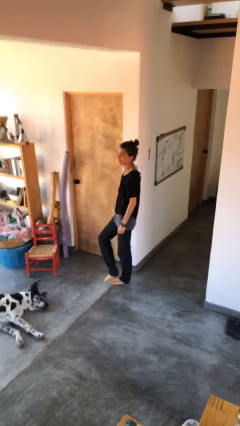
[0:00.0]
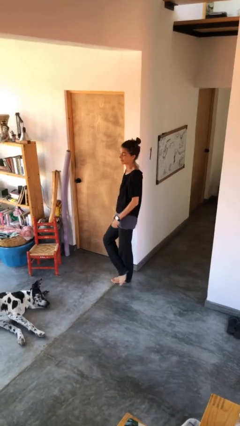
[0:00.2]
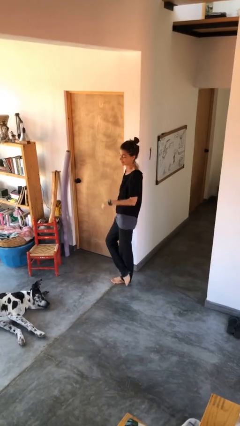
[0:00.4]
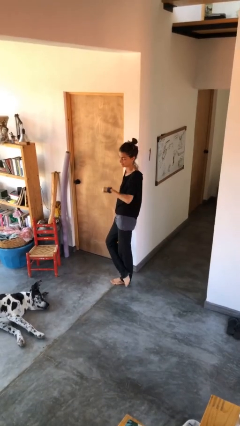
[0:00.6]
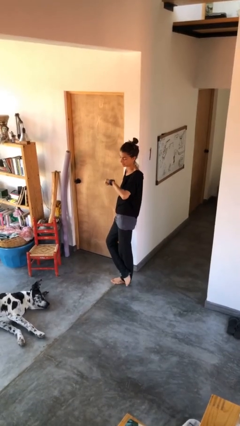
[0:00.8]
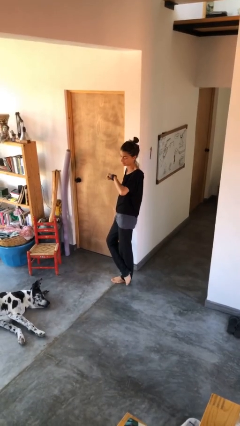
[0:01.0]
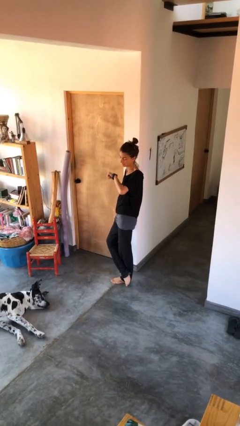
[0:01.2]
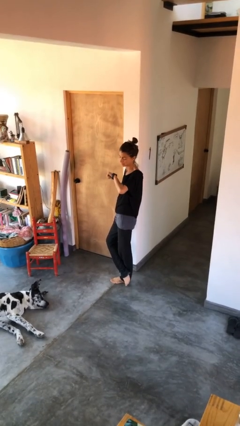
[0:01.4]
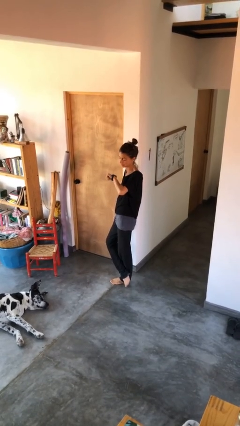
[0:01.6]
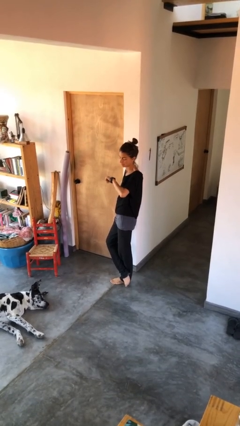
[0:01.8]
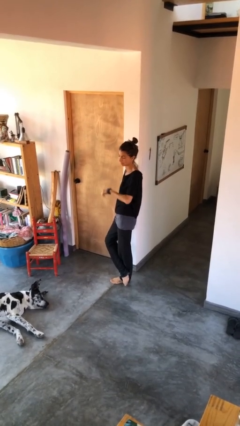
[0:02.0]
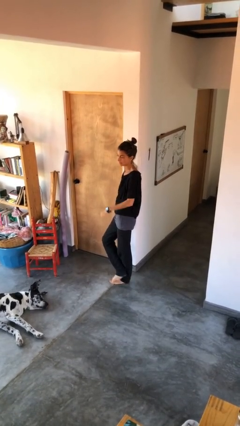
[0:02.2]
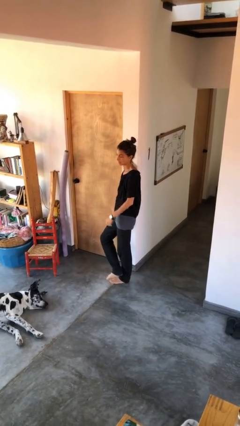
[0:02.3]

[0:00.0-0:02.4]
person looks at wristwatch

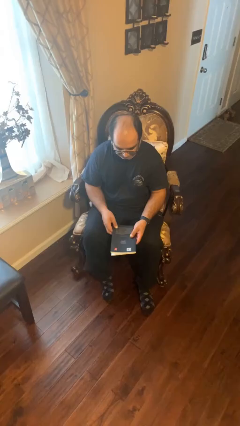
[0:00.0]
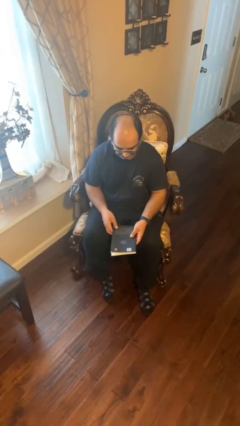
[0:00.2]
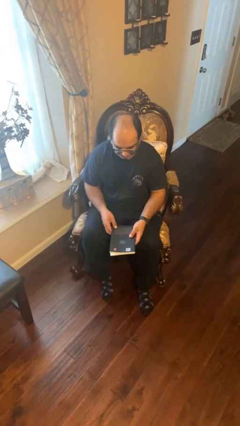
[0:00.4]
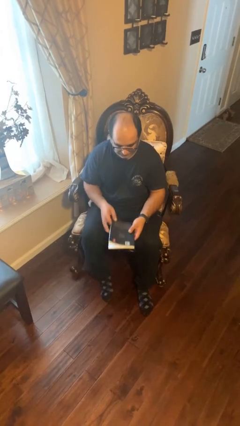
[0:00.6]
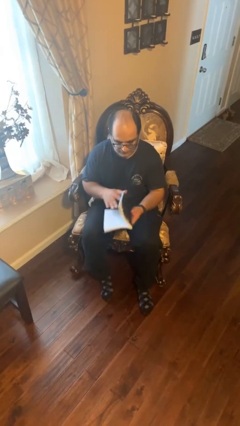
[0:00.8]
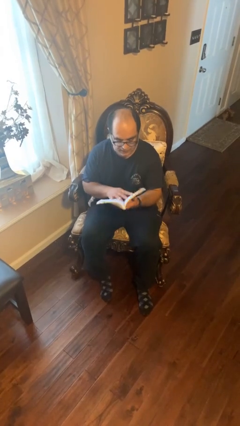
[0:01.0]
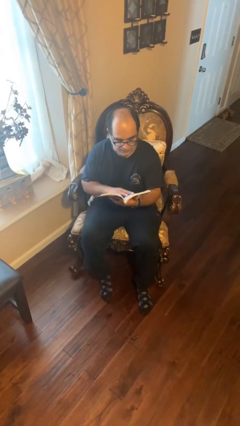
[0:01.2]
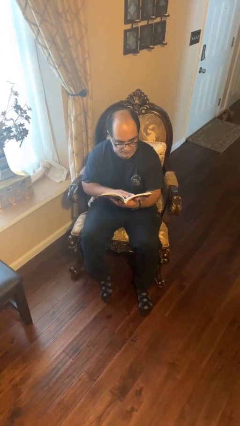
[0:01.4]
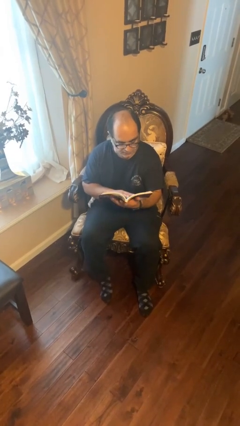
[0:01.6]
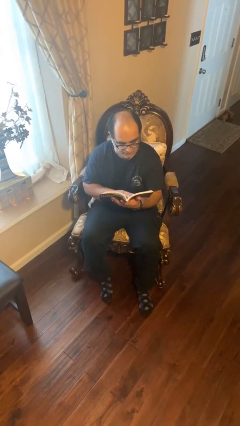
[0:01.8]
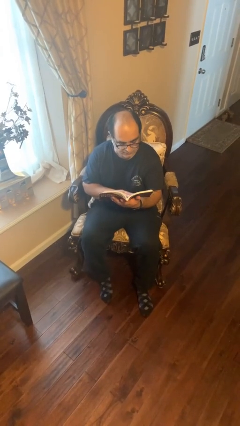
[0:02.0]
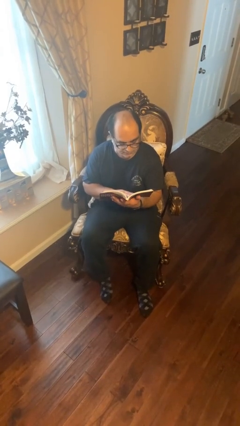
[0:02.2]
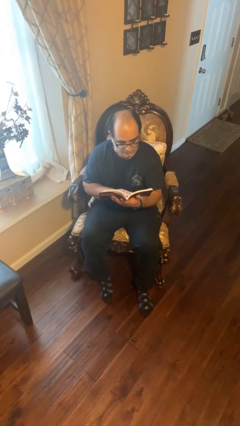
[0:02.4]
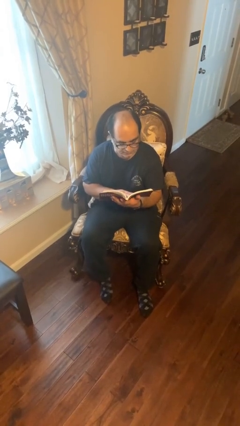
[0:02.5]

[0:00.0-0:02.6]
person reads document

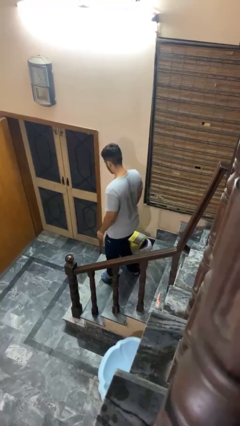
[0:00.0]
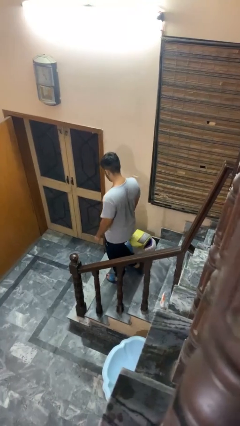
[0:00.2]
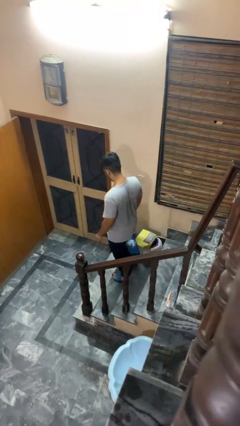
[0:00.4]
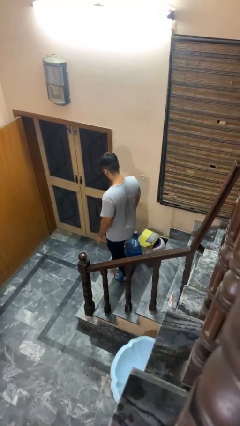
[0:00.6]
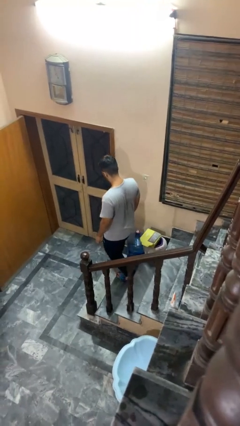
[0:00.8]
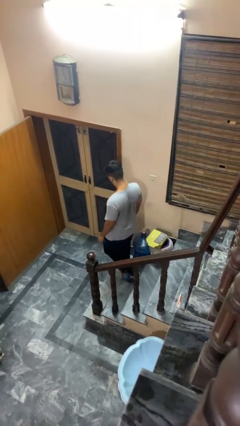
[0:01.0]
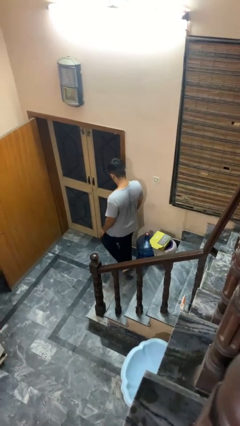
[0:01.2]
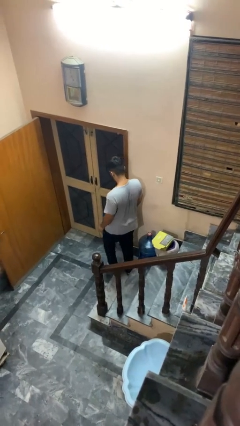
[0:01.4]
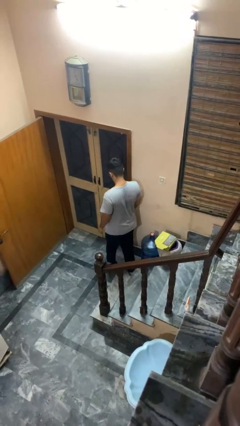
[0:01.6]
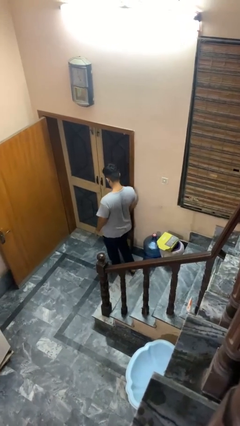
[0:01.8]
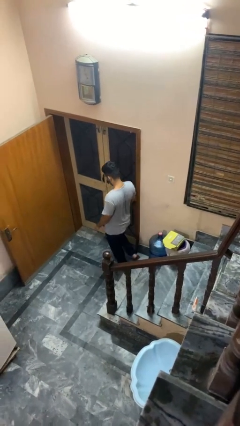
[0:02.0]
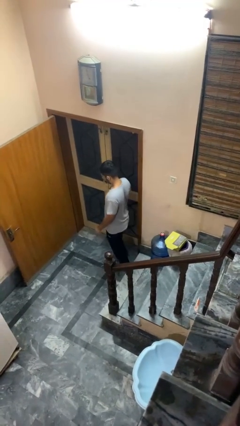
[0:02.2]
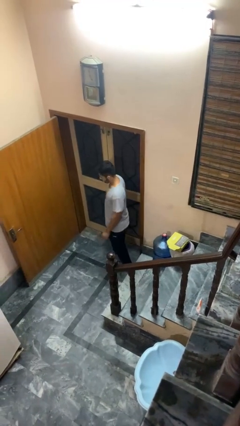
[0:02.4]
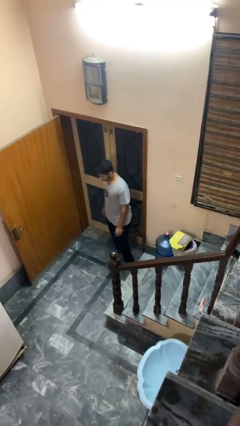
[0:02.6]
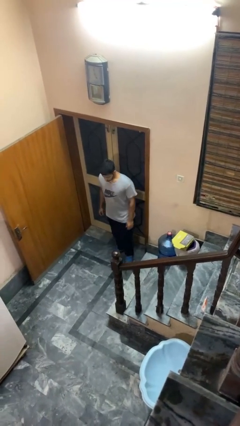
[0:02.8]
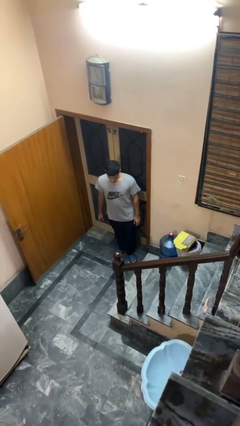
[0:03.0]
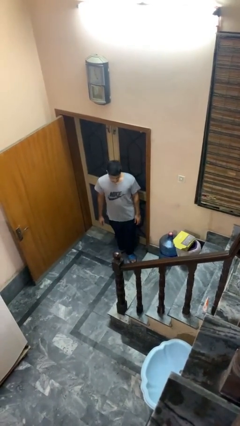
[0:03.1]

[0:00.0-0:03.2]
person climbs down stairs

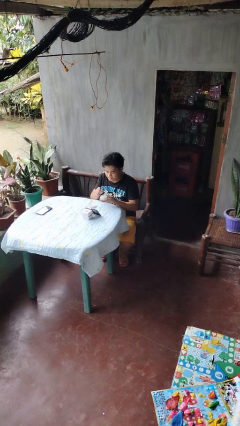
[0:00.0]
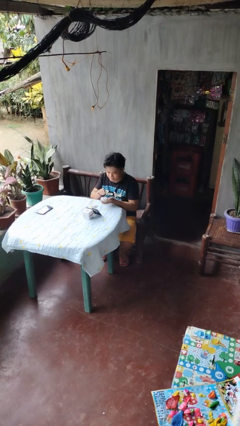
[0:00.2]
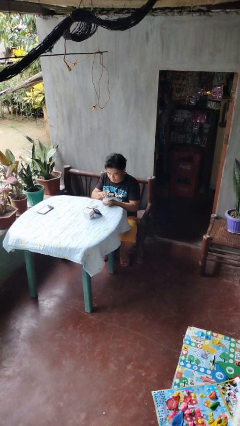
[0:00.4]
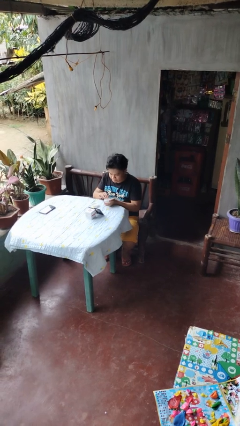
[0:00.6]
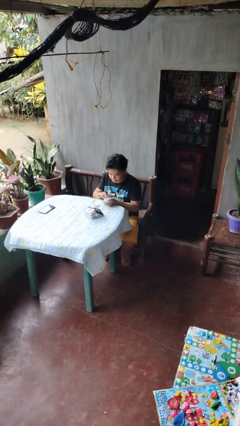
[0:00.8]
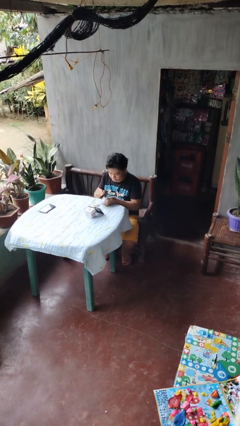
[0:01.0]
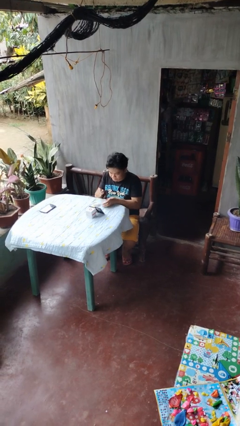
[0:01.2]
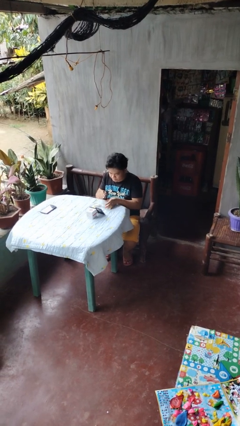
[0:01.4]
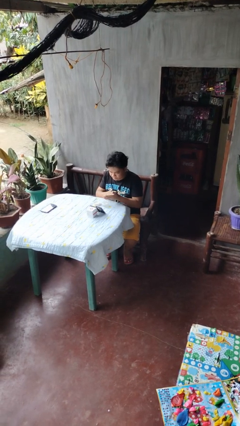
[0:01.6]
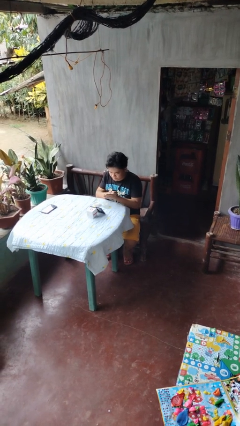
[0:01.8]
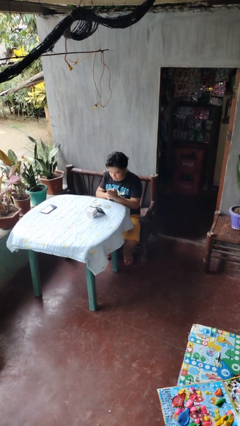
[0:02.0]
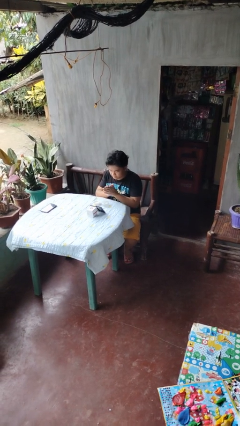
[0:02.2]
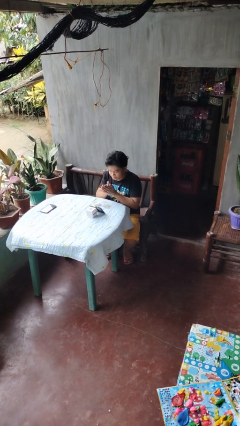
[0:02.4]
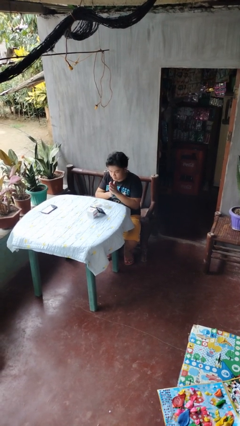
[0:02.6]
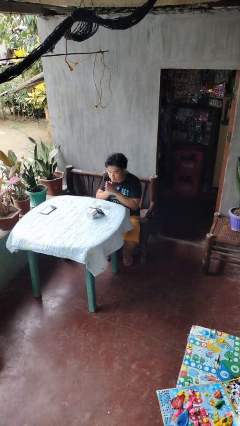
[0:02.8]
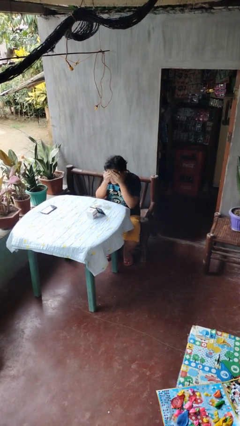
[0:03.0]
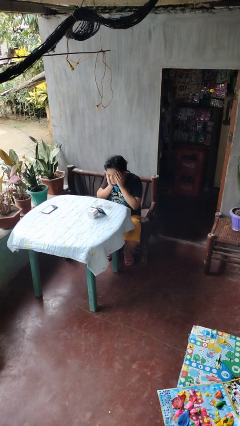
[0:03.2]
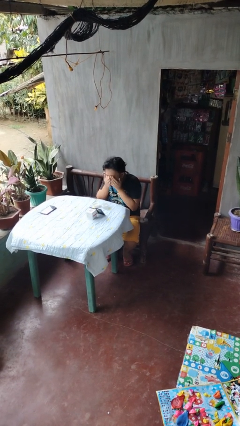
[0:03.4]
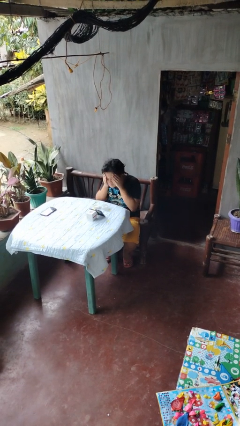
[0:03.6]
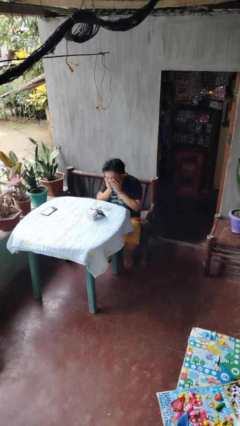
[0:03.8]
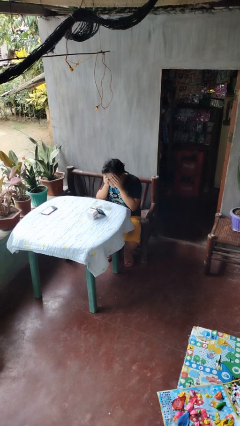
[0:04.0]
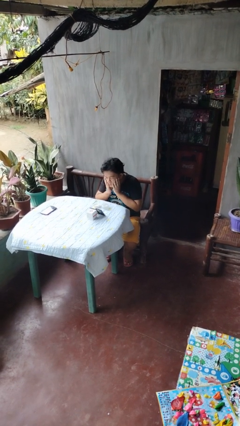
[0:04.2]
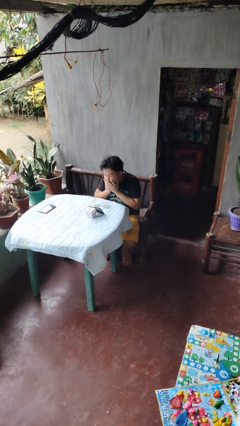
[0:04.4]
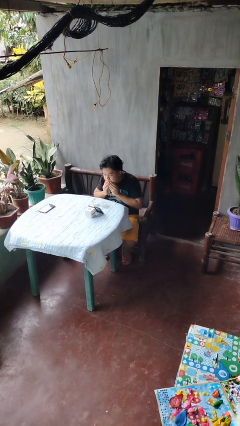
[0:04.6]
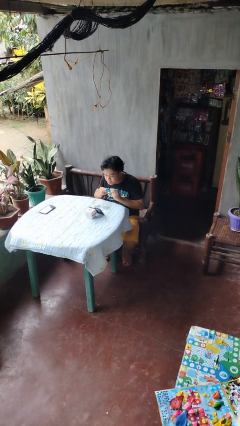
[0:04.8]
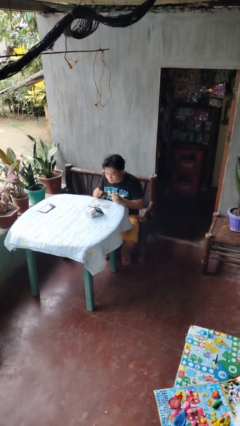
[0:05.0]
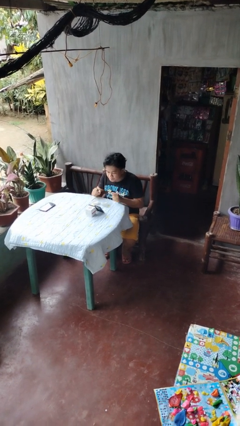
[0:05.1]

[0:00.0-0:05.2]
person applies facial moisturizer

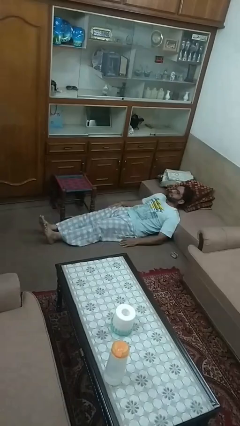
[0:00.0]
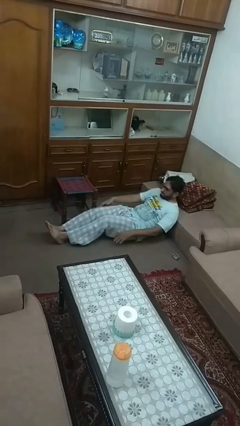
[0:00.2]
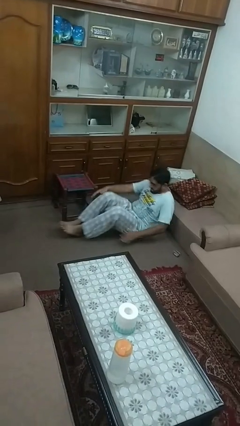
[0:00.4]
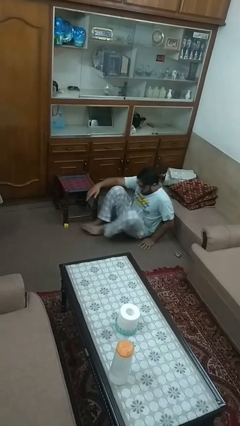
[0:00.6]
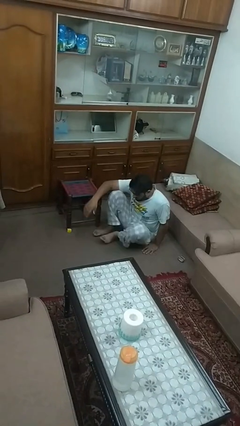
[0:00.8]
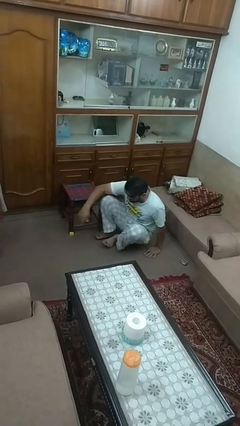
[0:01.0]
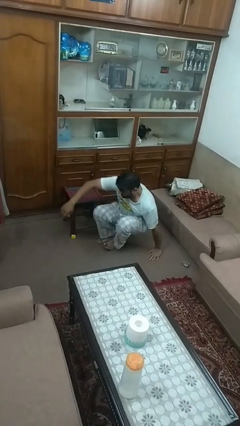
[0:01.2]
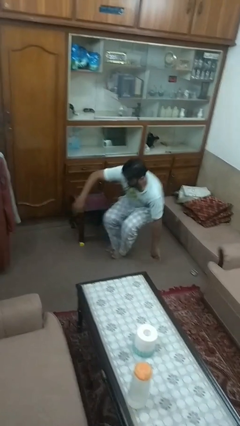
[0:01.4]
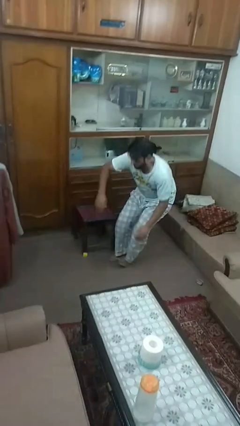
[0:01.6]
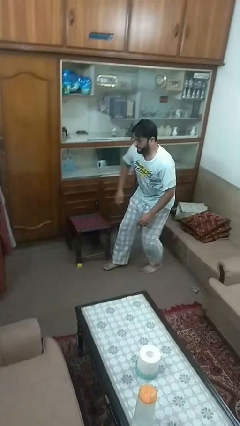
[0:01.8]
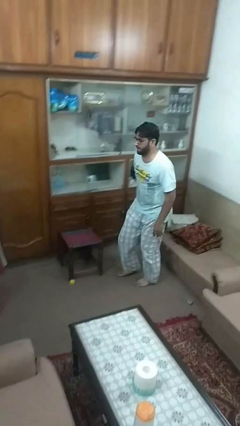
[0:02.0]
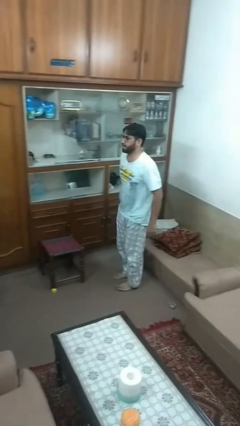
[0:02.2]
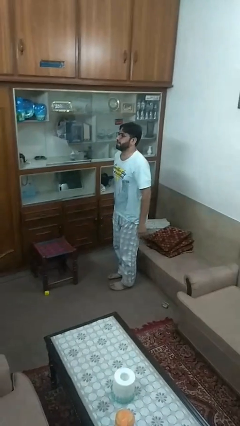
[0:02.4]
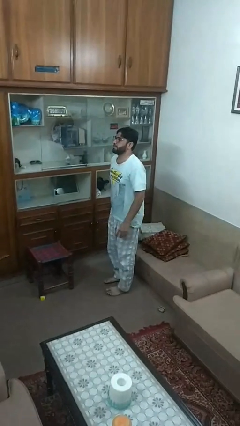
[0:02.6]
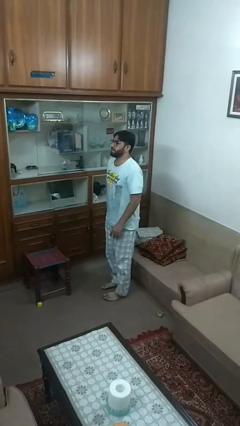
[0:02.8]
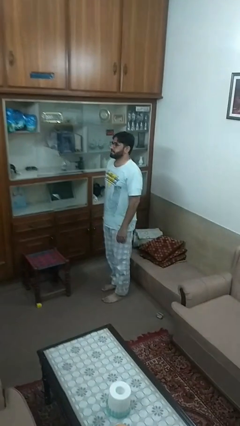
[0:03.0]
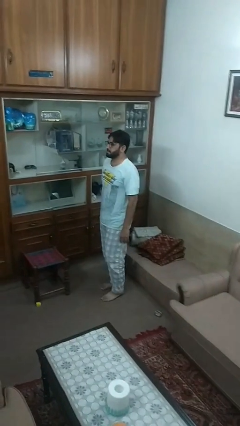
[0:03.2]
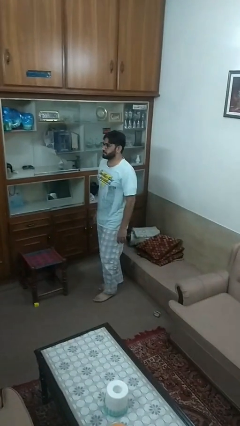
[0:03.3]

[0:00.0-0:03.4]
person stands up from floor

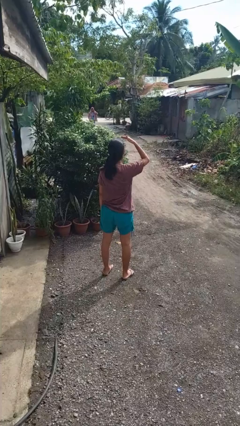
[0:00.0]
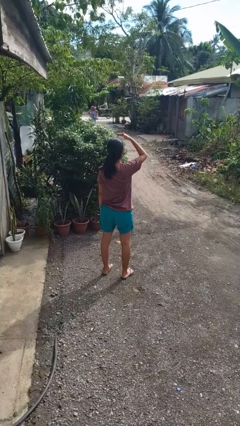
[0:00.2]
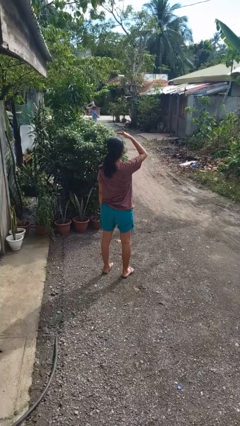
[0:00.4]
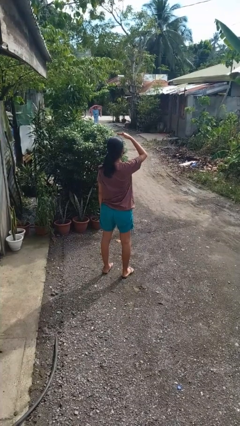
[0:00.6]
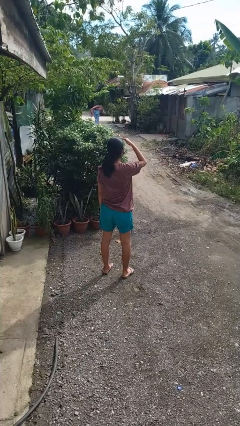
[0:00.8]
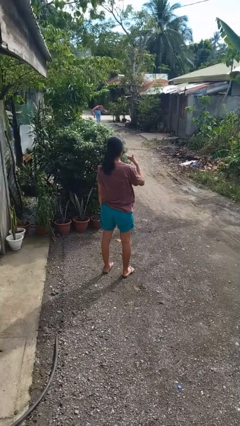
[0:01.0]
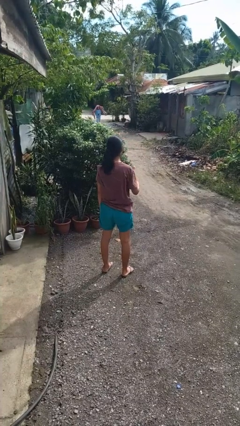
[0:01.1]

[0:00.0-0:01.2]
person shades eyes
